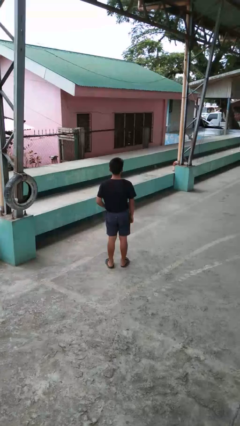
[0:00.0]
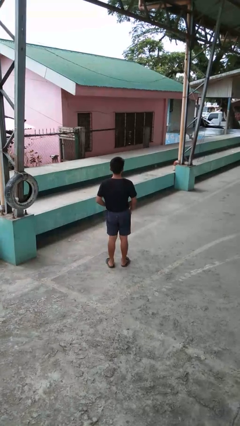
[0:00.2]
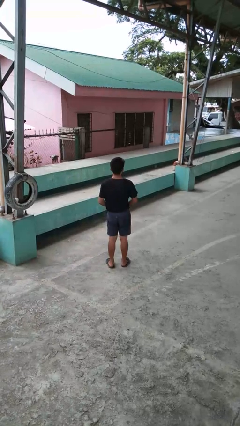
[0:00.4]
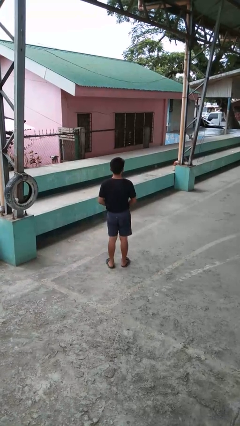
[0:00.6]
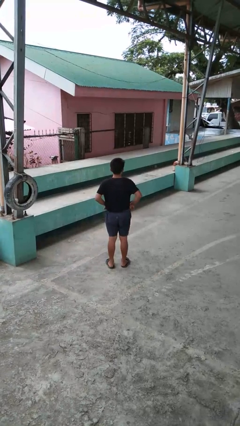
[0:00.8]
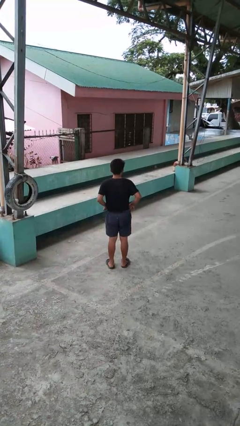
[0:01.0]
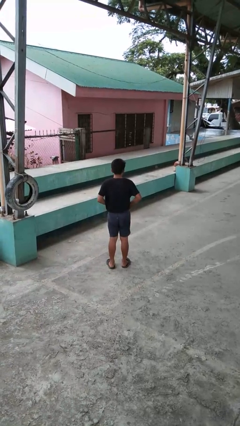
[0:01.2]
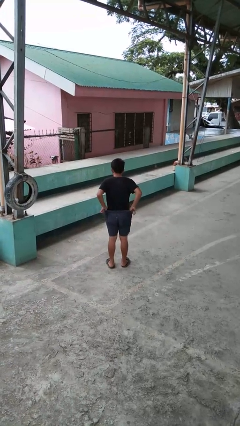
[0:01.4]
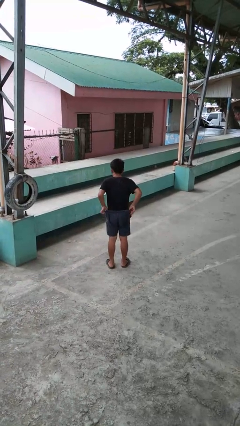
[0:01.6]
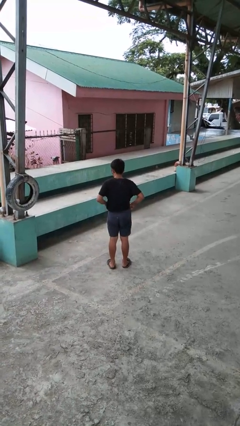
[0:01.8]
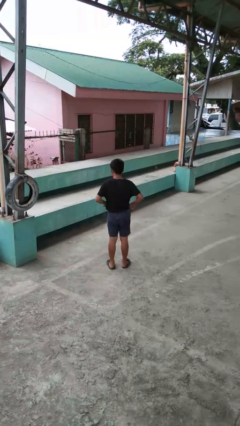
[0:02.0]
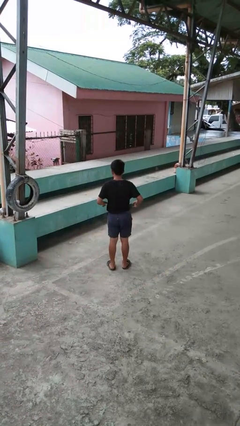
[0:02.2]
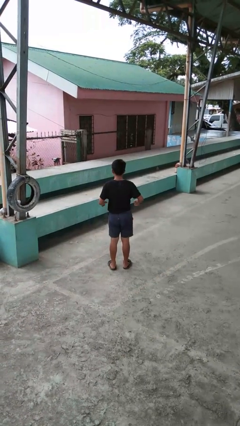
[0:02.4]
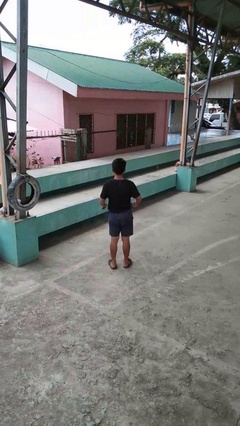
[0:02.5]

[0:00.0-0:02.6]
person hikes up pants

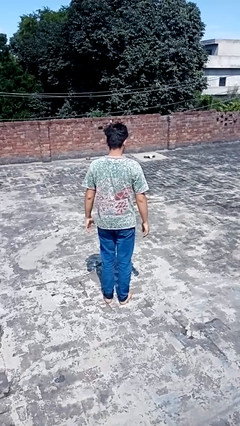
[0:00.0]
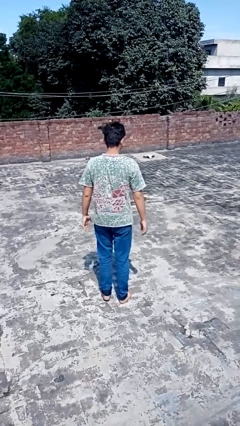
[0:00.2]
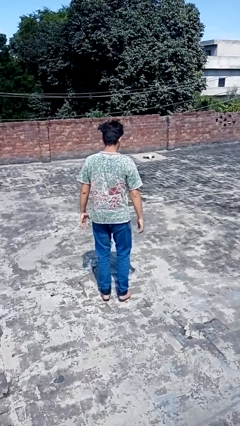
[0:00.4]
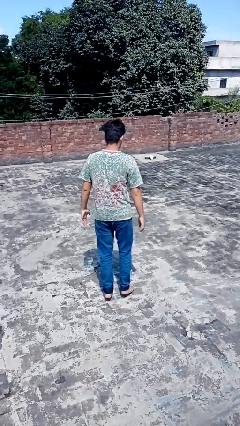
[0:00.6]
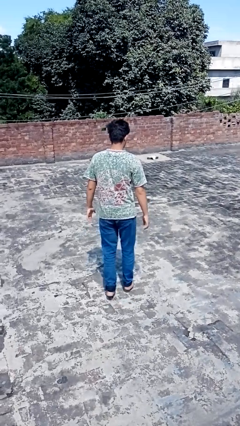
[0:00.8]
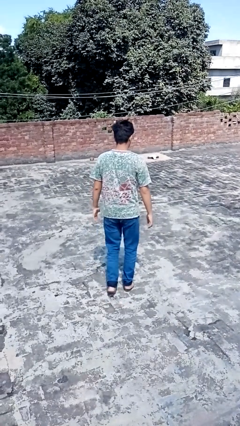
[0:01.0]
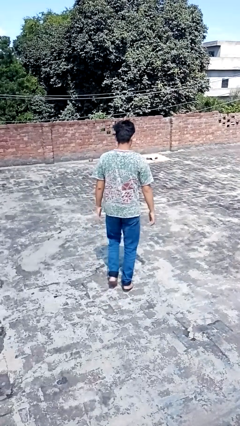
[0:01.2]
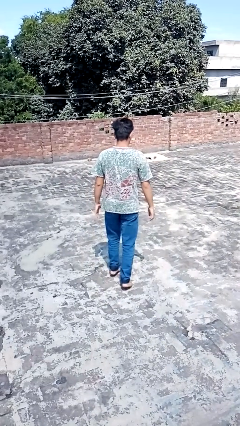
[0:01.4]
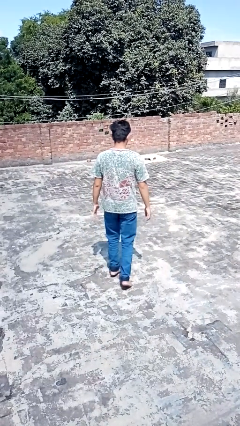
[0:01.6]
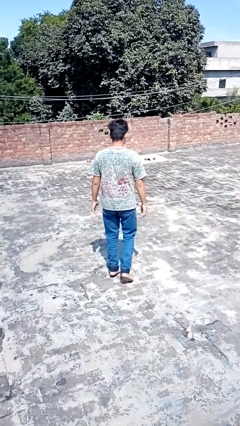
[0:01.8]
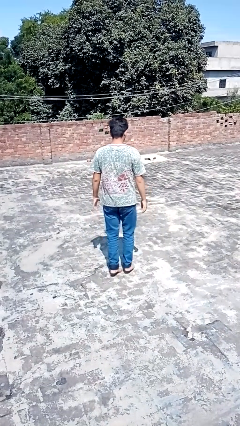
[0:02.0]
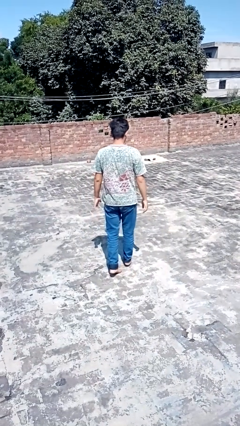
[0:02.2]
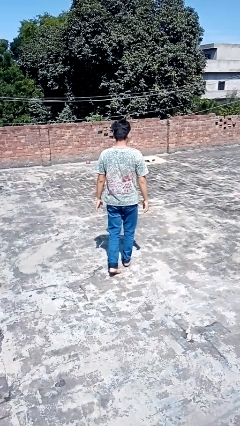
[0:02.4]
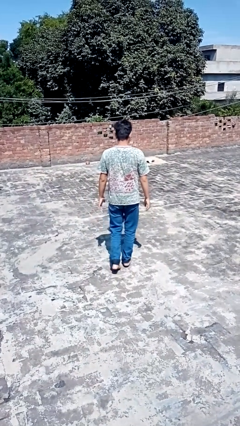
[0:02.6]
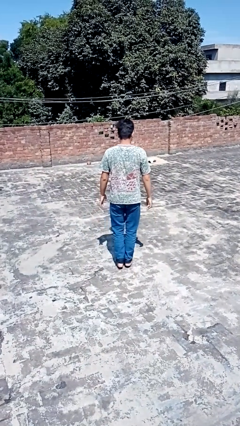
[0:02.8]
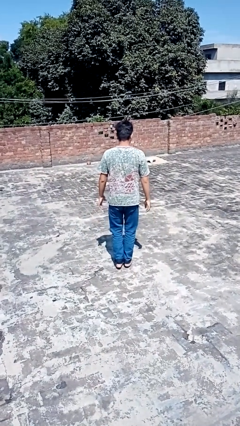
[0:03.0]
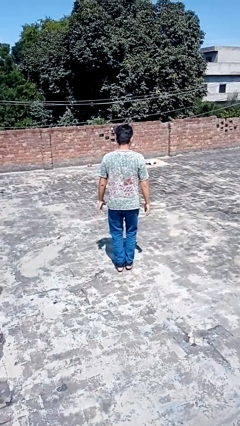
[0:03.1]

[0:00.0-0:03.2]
person walks tiptoe

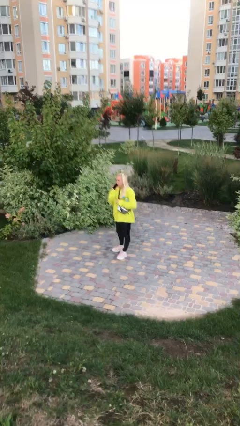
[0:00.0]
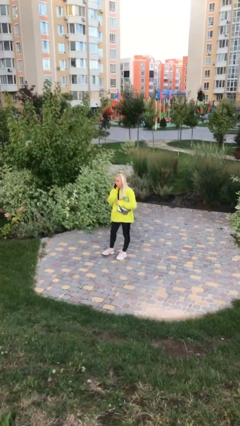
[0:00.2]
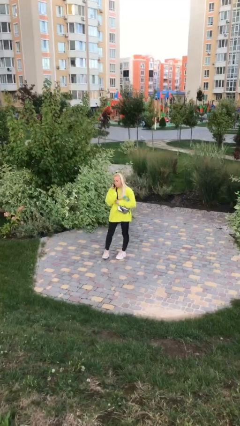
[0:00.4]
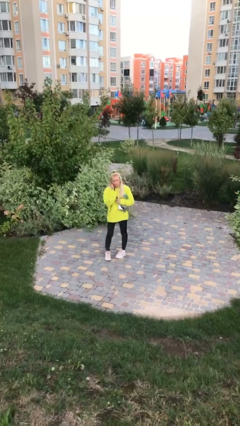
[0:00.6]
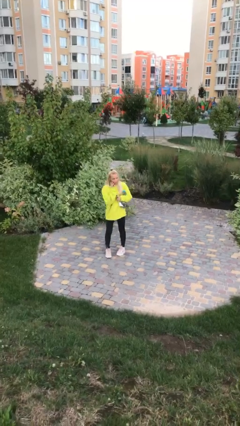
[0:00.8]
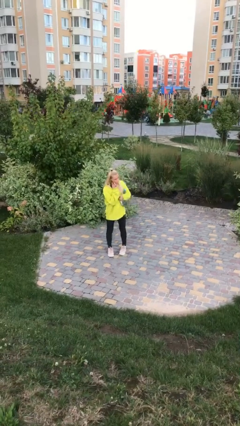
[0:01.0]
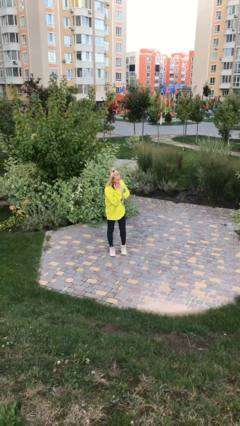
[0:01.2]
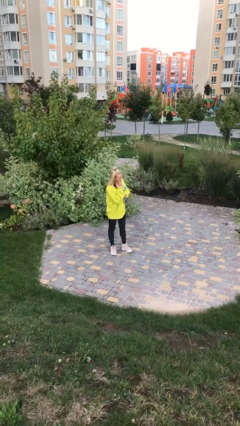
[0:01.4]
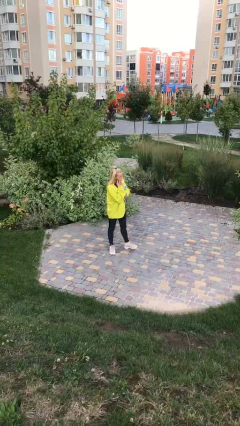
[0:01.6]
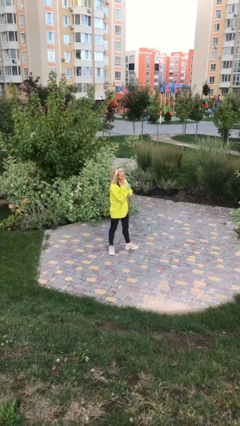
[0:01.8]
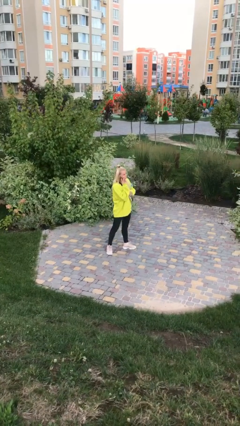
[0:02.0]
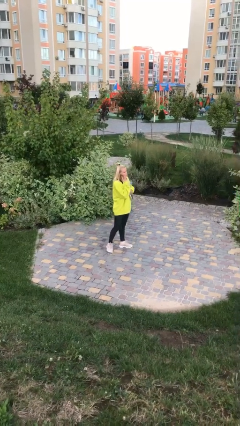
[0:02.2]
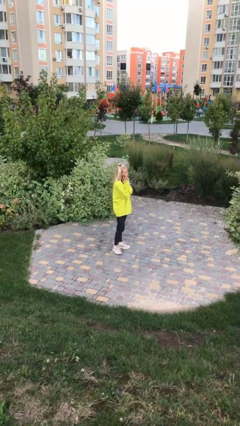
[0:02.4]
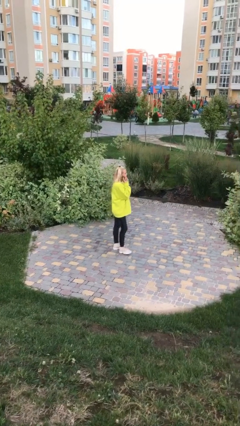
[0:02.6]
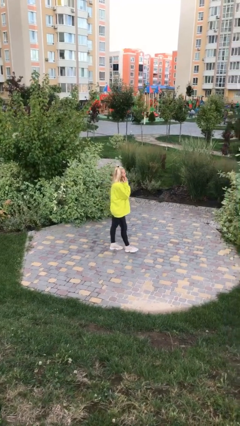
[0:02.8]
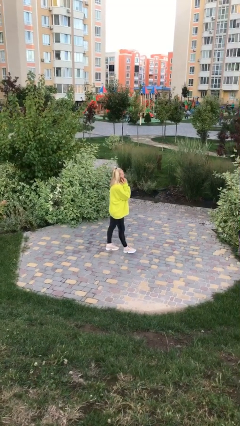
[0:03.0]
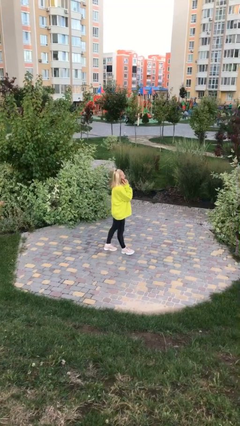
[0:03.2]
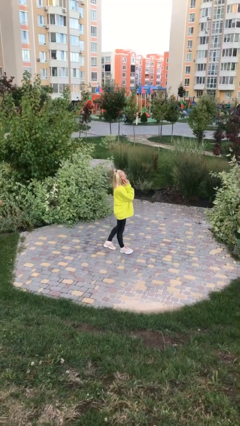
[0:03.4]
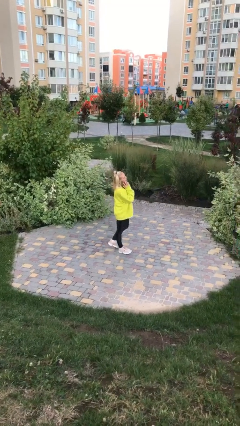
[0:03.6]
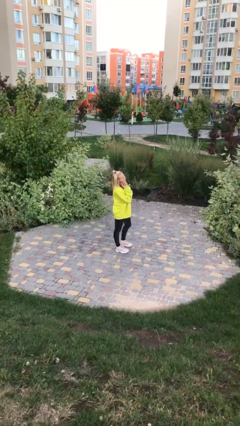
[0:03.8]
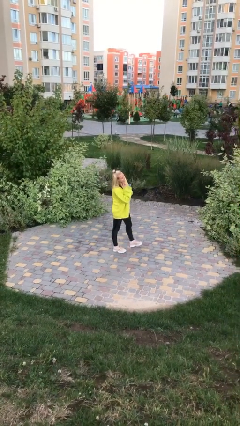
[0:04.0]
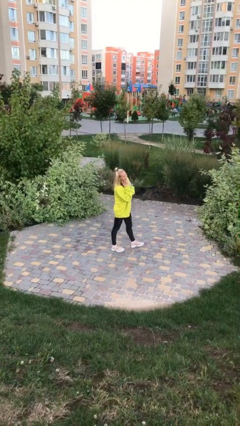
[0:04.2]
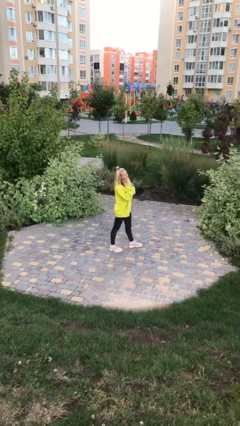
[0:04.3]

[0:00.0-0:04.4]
person talks on phone

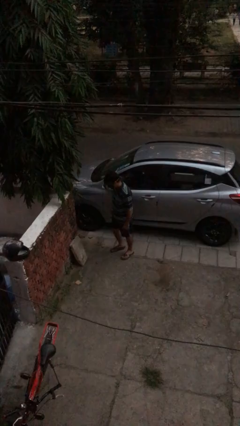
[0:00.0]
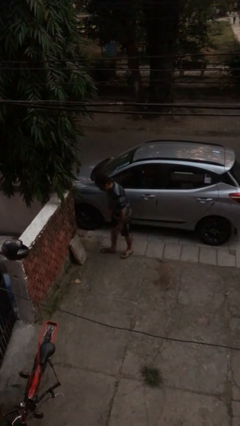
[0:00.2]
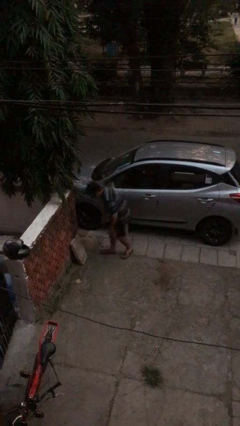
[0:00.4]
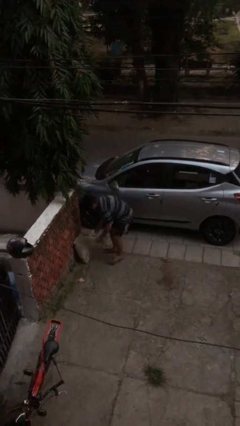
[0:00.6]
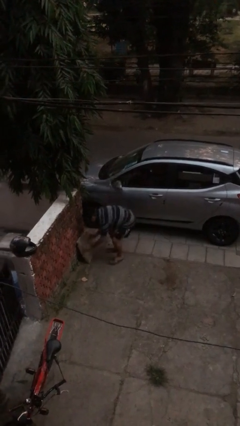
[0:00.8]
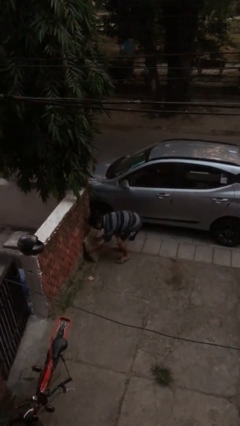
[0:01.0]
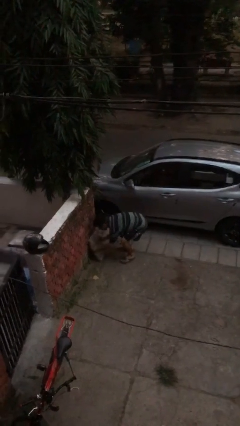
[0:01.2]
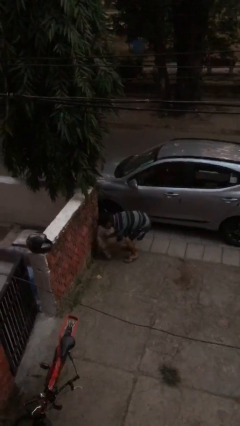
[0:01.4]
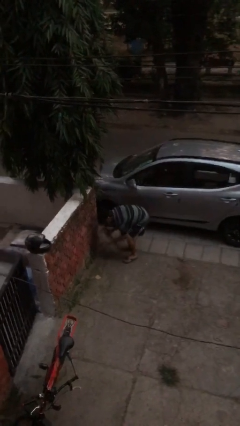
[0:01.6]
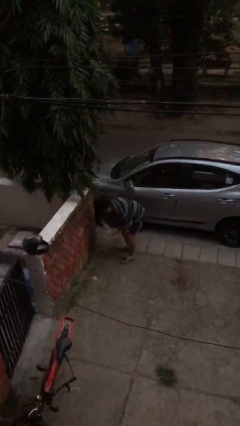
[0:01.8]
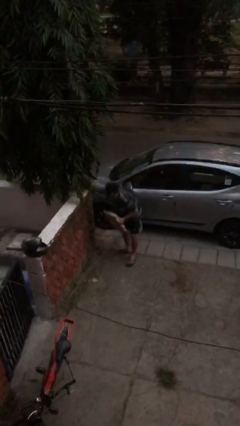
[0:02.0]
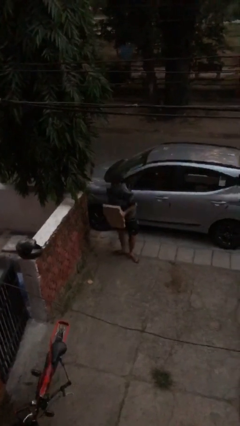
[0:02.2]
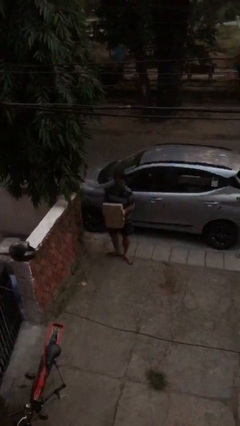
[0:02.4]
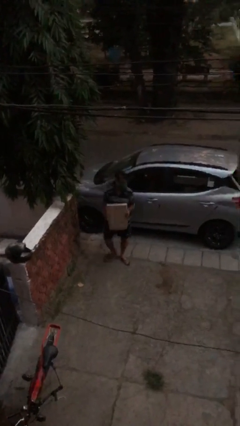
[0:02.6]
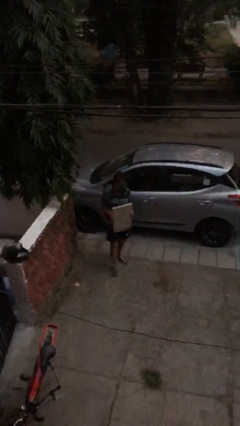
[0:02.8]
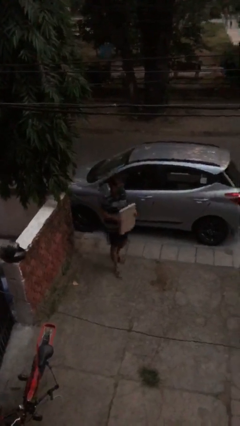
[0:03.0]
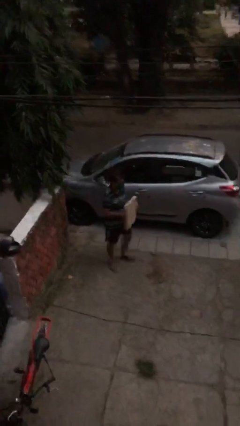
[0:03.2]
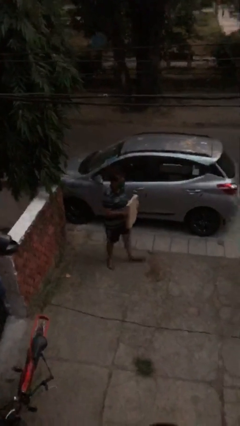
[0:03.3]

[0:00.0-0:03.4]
person picks up object from floor

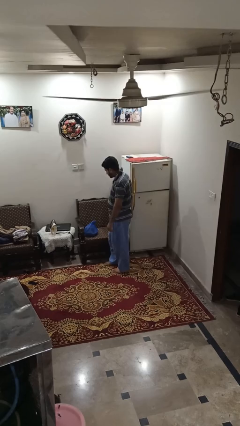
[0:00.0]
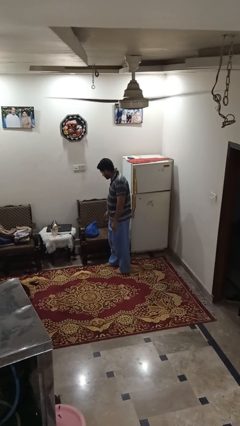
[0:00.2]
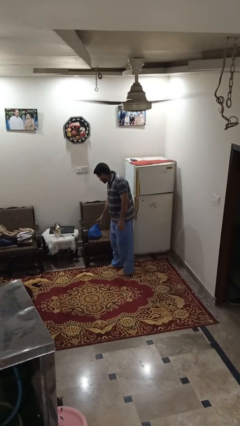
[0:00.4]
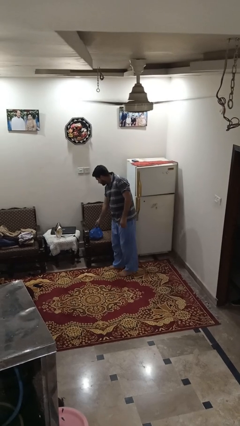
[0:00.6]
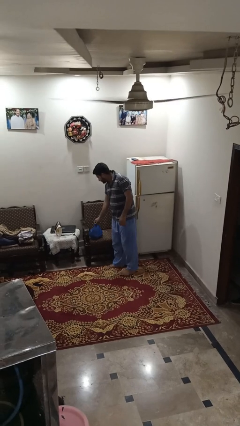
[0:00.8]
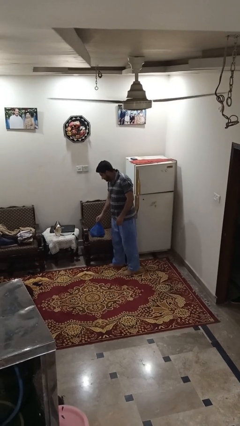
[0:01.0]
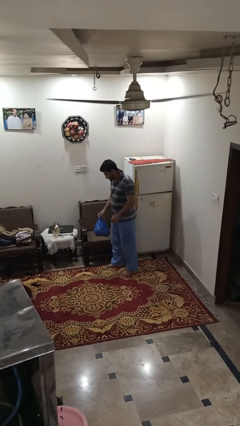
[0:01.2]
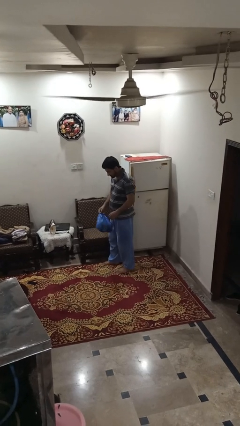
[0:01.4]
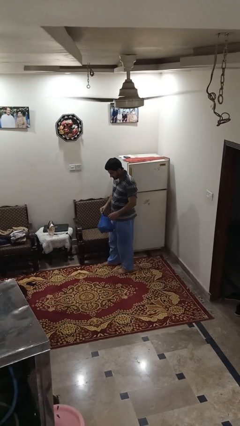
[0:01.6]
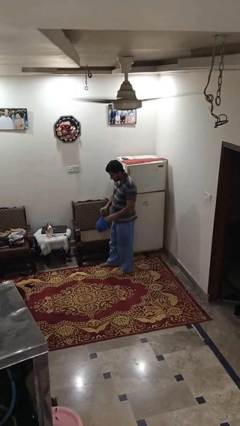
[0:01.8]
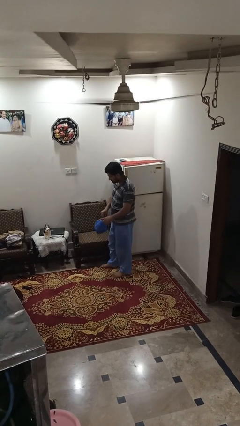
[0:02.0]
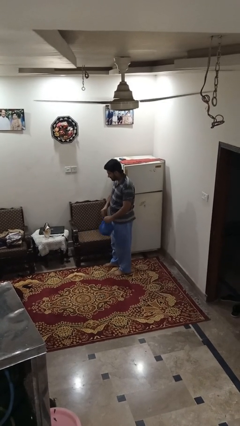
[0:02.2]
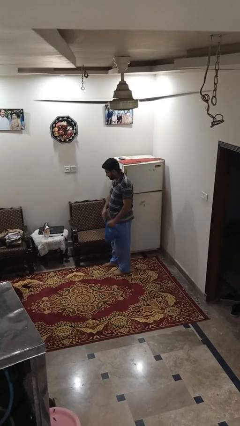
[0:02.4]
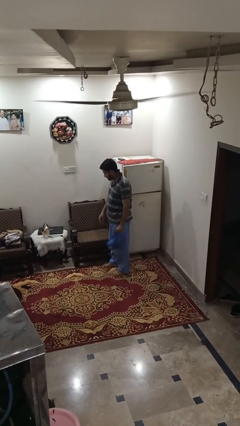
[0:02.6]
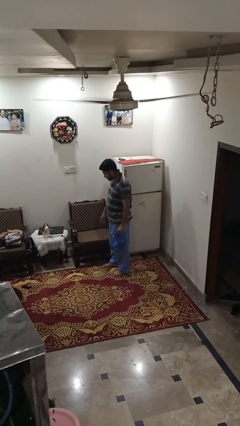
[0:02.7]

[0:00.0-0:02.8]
person picks up object from couch

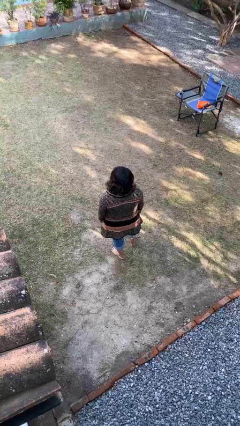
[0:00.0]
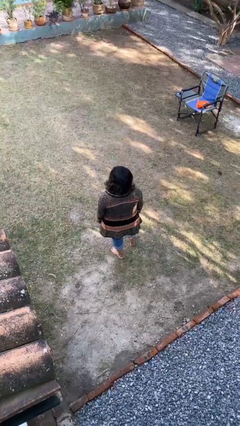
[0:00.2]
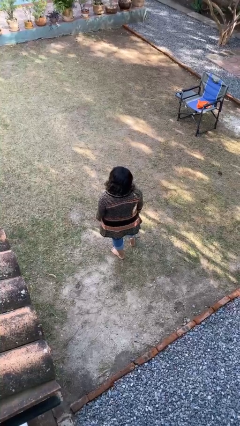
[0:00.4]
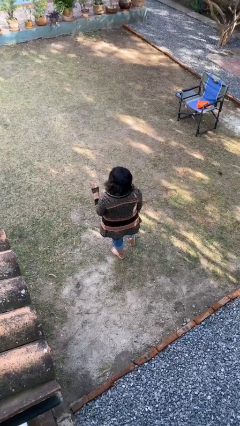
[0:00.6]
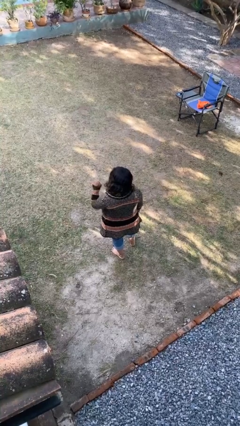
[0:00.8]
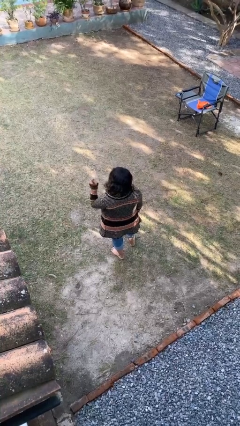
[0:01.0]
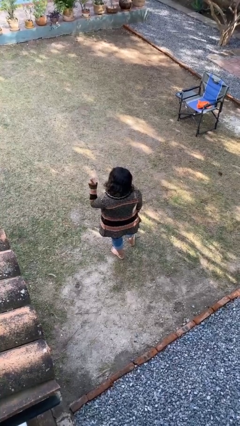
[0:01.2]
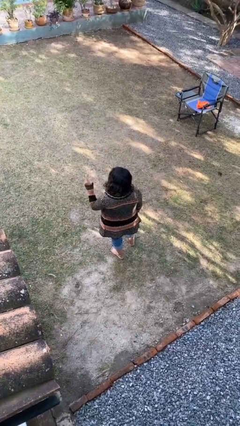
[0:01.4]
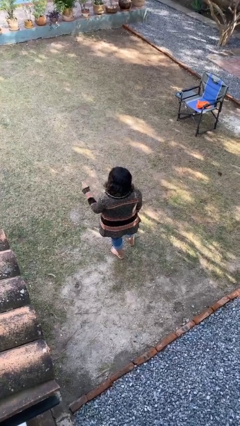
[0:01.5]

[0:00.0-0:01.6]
person gestures number one
